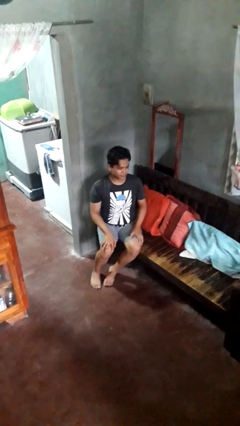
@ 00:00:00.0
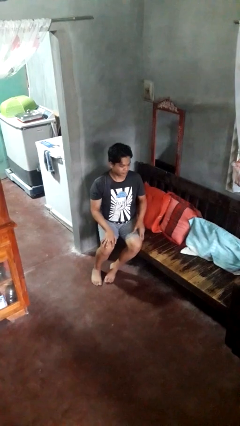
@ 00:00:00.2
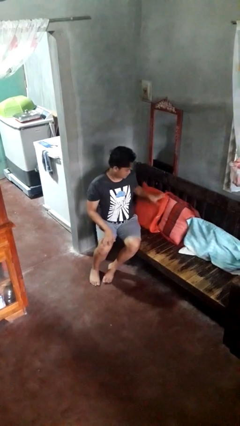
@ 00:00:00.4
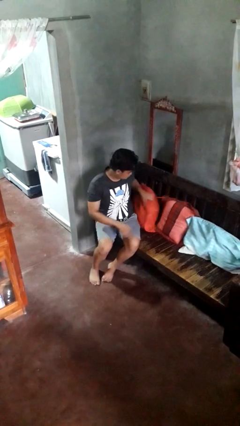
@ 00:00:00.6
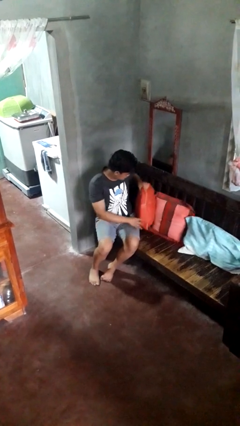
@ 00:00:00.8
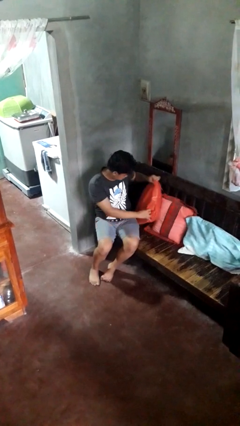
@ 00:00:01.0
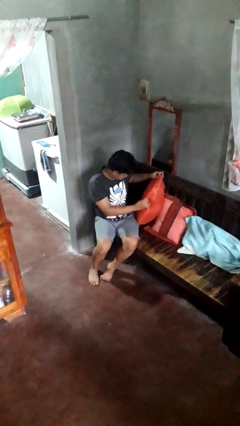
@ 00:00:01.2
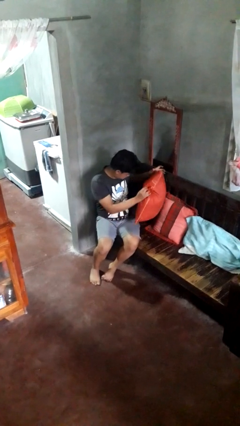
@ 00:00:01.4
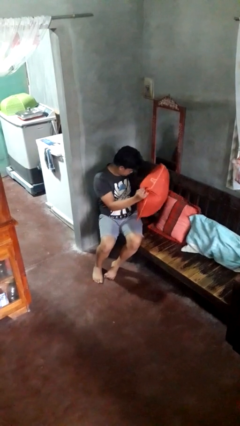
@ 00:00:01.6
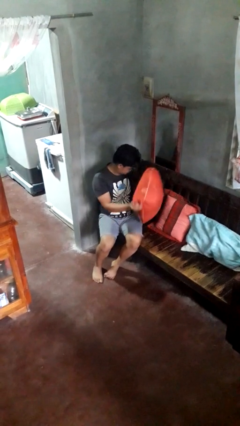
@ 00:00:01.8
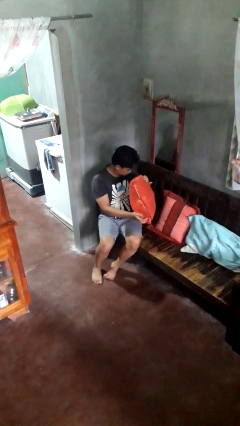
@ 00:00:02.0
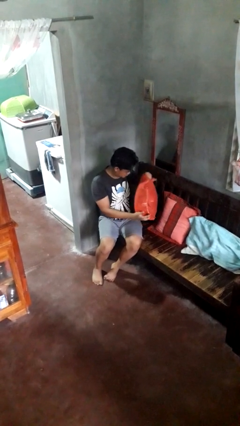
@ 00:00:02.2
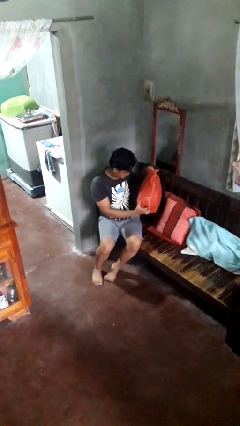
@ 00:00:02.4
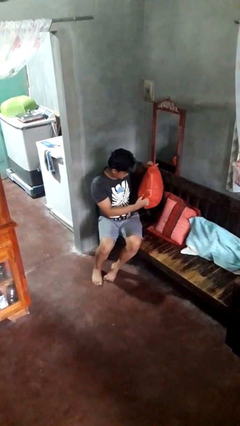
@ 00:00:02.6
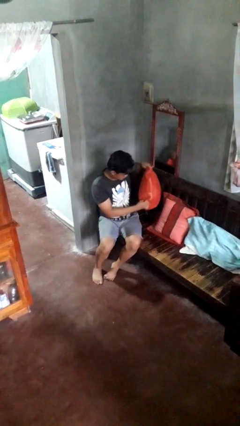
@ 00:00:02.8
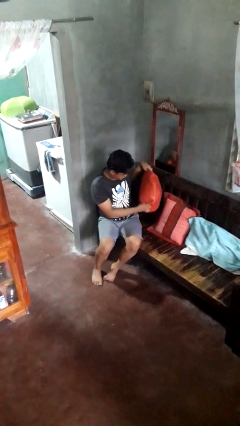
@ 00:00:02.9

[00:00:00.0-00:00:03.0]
person searches in couch

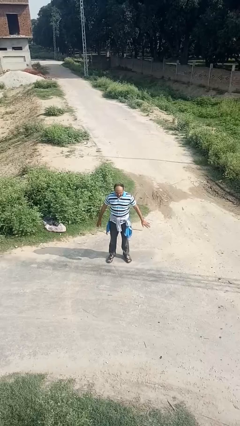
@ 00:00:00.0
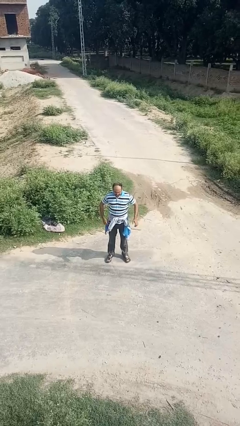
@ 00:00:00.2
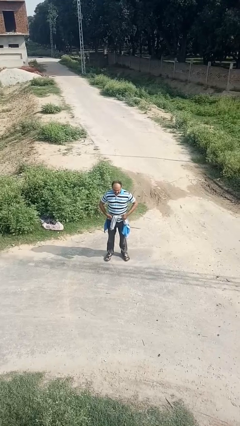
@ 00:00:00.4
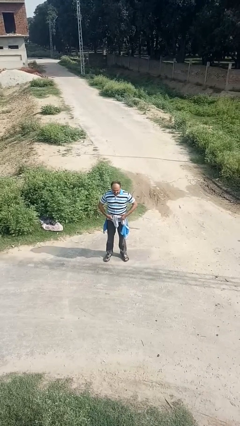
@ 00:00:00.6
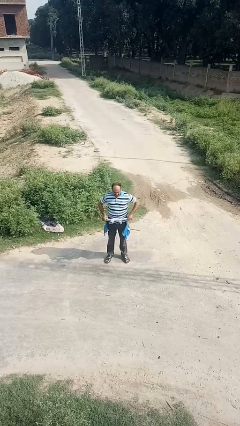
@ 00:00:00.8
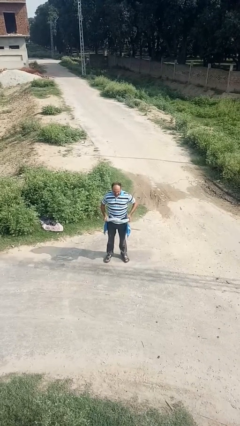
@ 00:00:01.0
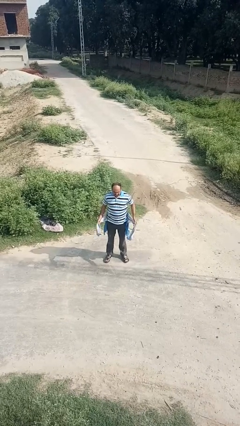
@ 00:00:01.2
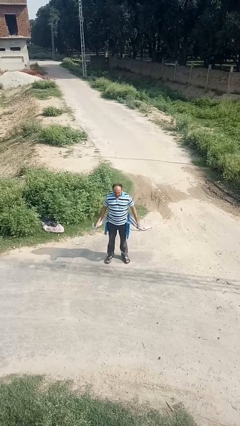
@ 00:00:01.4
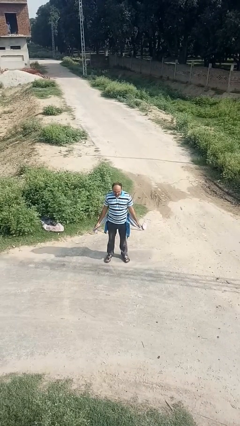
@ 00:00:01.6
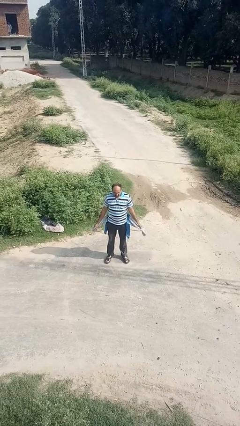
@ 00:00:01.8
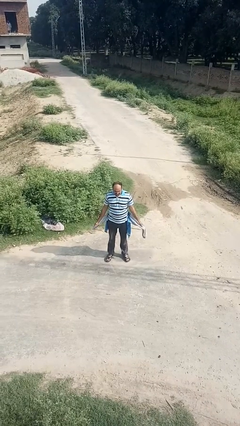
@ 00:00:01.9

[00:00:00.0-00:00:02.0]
person unties jacket around waist

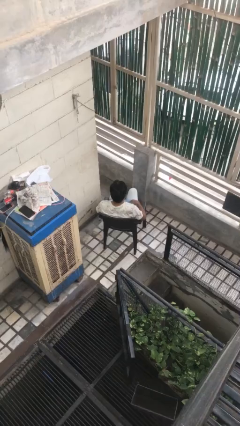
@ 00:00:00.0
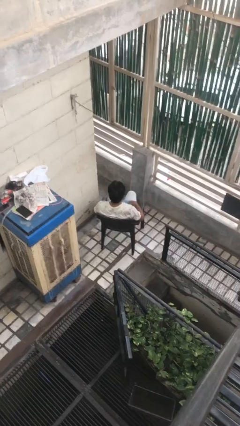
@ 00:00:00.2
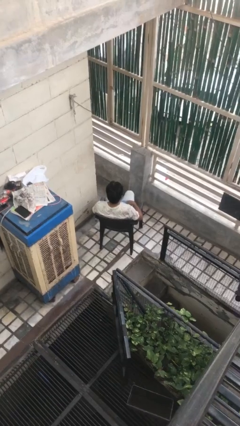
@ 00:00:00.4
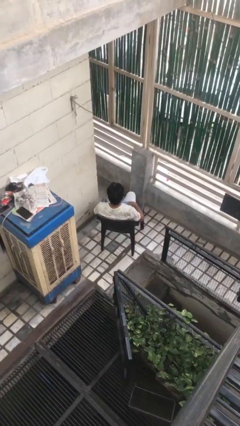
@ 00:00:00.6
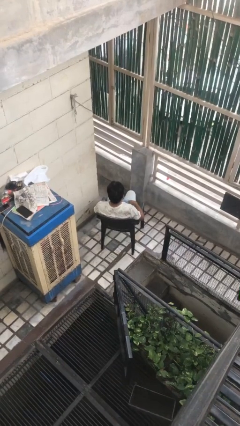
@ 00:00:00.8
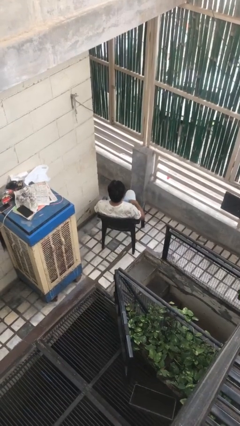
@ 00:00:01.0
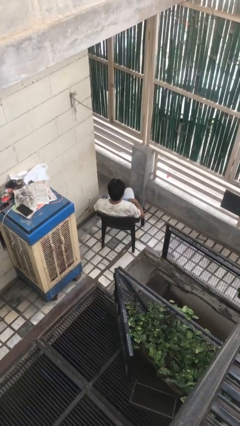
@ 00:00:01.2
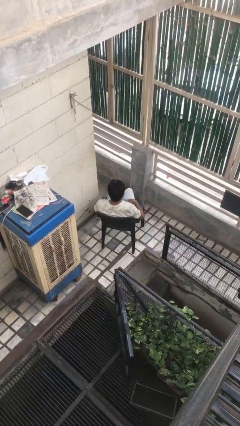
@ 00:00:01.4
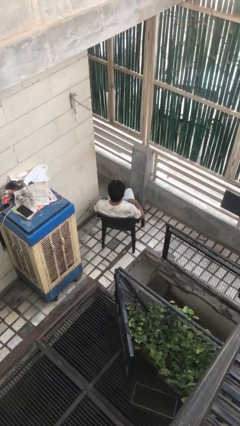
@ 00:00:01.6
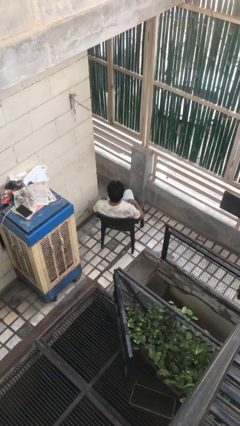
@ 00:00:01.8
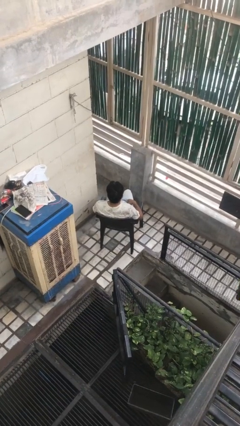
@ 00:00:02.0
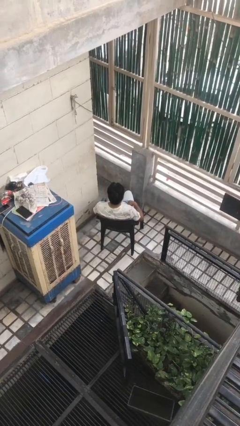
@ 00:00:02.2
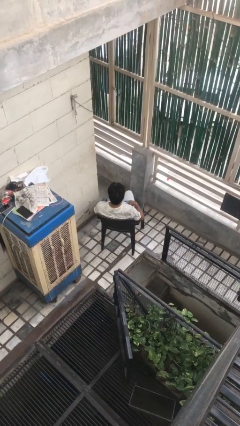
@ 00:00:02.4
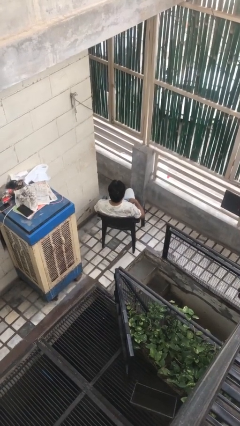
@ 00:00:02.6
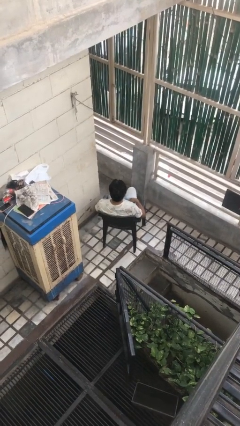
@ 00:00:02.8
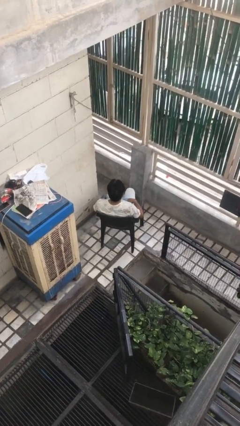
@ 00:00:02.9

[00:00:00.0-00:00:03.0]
person crosses legs

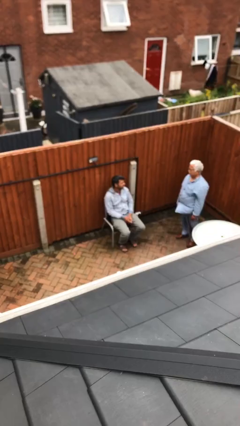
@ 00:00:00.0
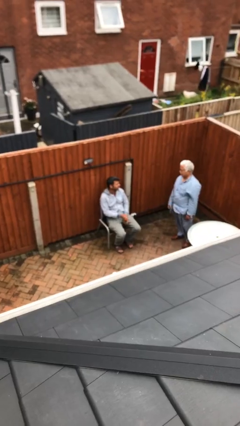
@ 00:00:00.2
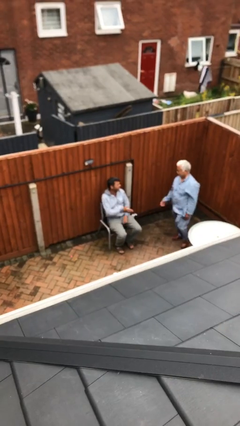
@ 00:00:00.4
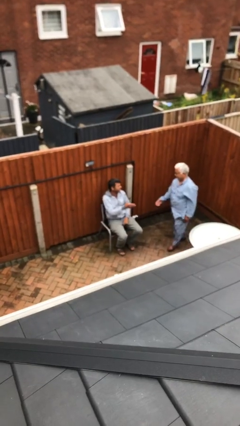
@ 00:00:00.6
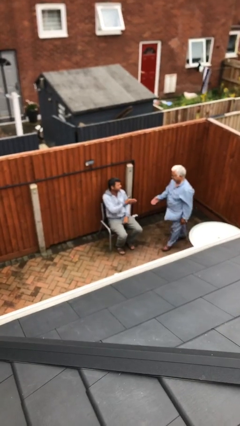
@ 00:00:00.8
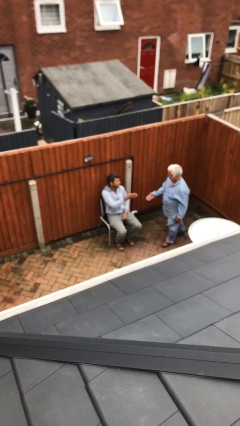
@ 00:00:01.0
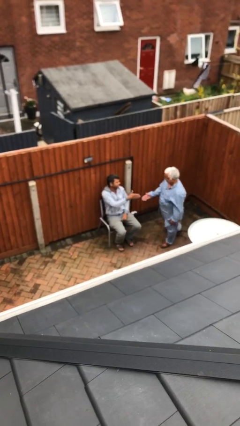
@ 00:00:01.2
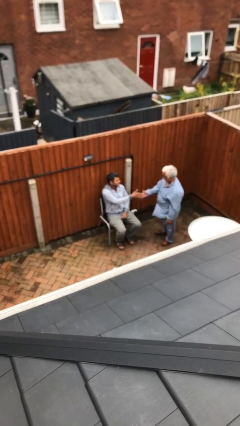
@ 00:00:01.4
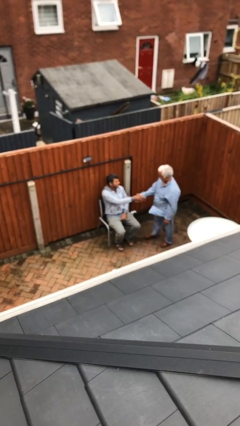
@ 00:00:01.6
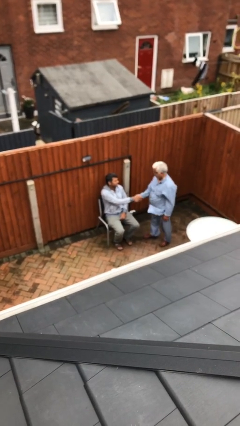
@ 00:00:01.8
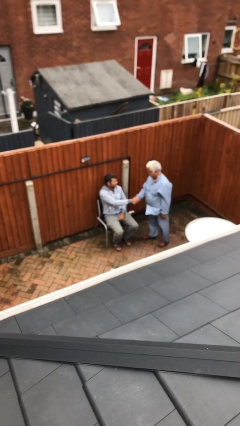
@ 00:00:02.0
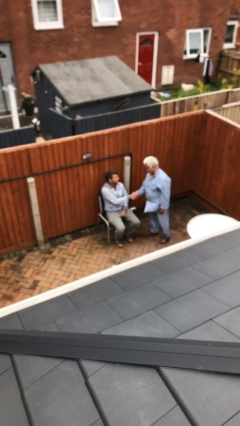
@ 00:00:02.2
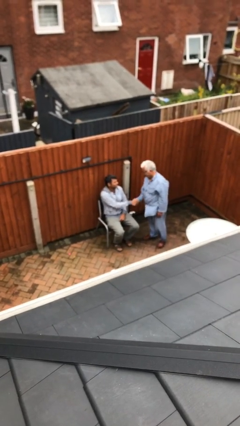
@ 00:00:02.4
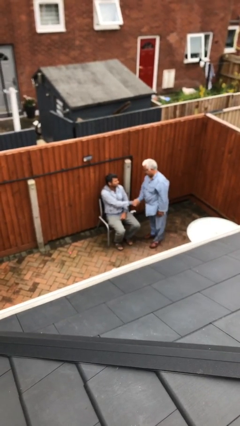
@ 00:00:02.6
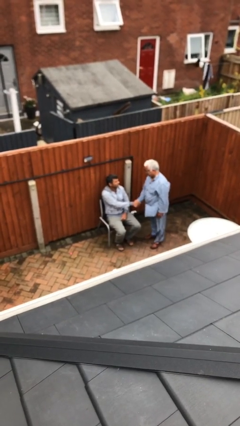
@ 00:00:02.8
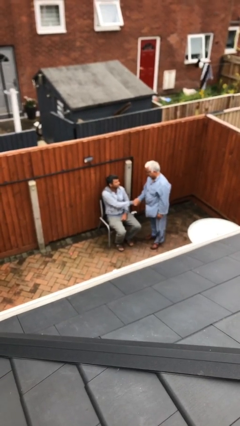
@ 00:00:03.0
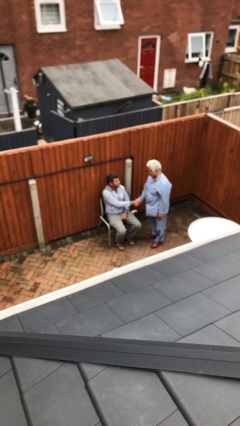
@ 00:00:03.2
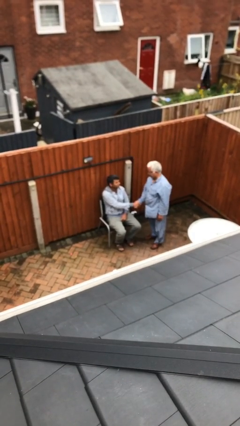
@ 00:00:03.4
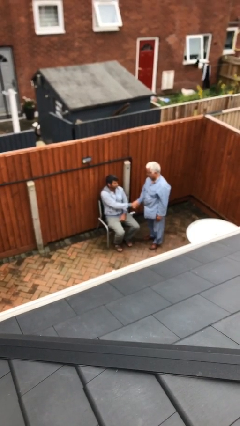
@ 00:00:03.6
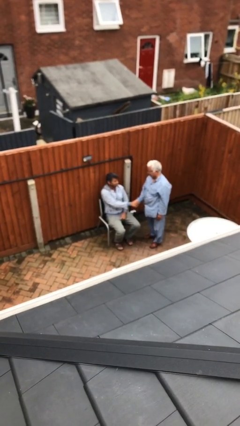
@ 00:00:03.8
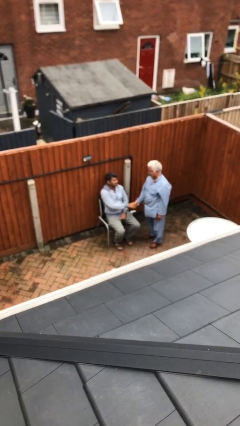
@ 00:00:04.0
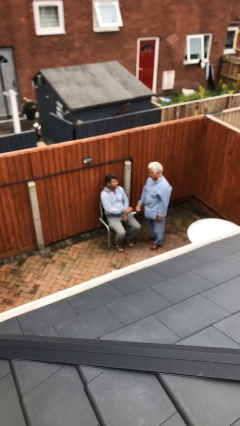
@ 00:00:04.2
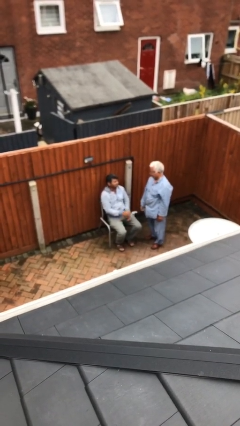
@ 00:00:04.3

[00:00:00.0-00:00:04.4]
person shakes hand

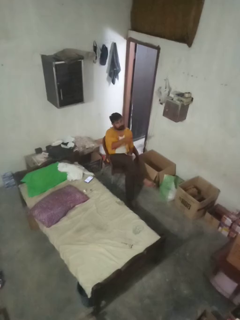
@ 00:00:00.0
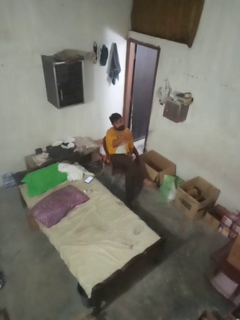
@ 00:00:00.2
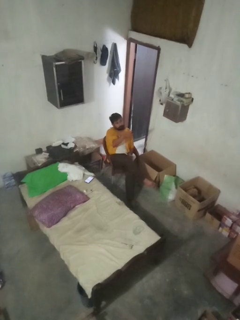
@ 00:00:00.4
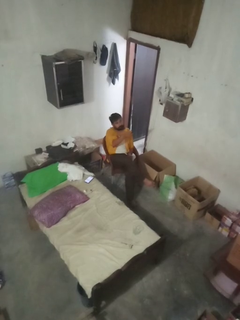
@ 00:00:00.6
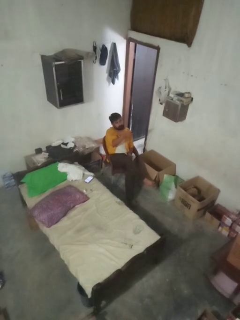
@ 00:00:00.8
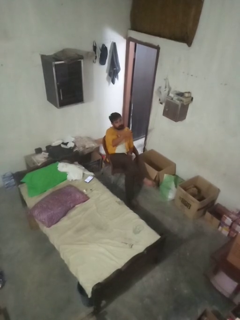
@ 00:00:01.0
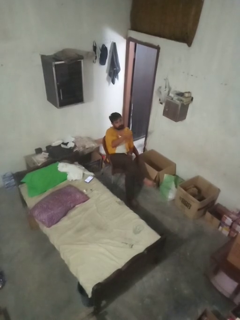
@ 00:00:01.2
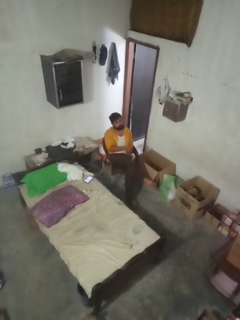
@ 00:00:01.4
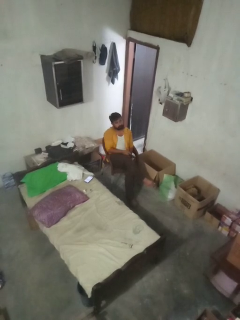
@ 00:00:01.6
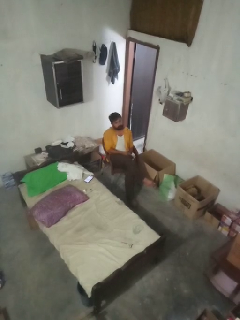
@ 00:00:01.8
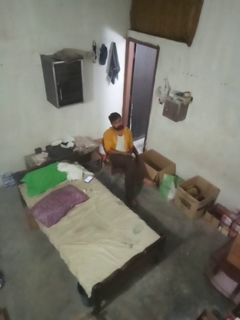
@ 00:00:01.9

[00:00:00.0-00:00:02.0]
person uses television remote

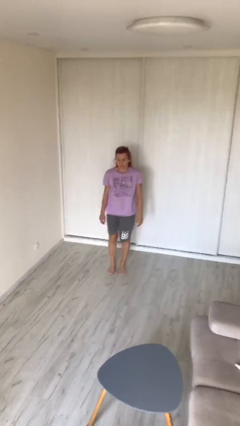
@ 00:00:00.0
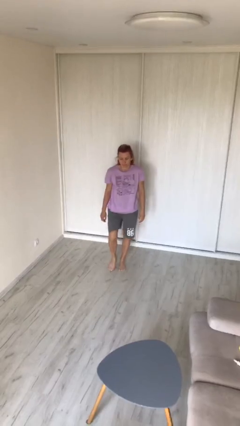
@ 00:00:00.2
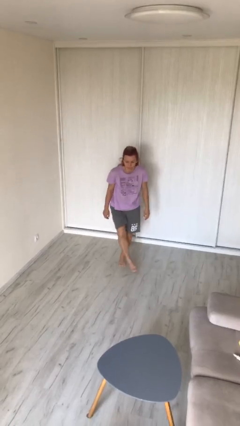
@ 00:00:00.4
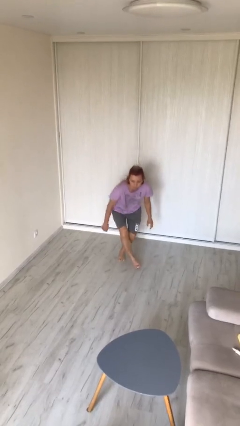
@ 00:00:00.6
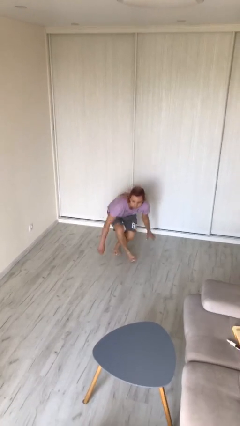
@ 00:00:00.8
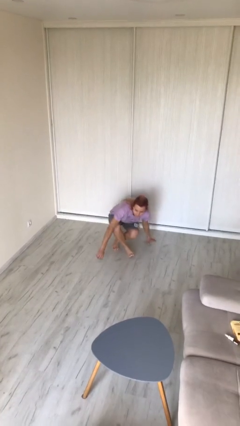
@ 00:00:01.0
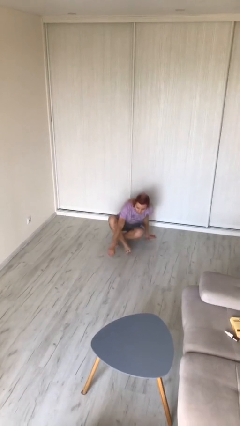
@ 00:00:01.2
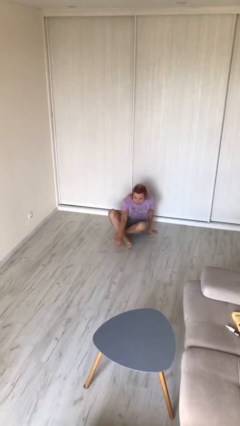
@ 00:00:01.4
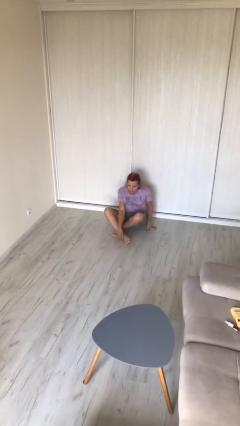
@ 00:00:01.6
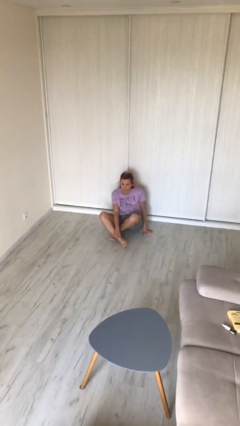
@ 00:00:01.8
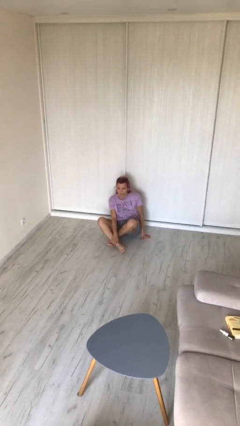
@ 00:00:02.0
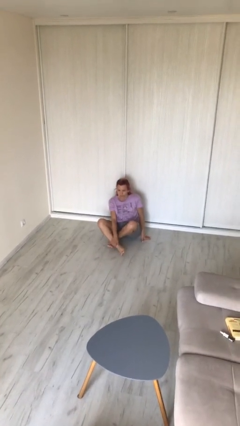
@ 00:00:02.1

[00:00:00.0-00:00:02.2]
person sits crisscross

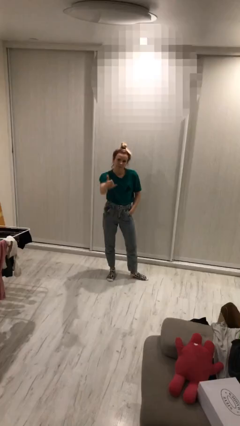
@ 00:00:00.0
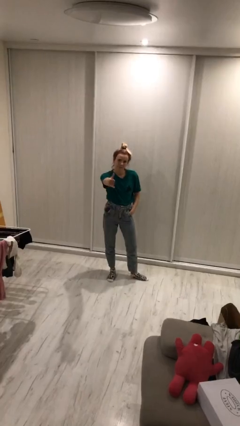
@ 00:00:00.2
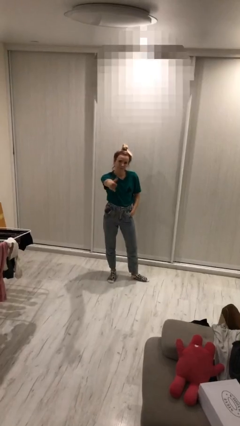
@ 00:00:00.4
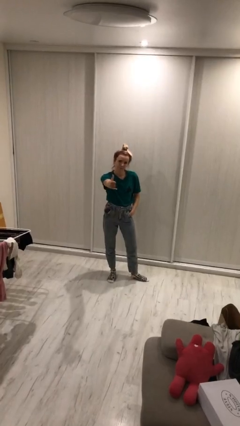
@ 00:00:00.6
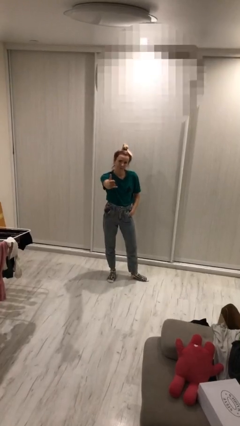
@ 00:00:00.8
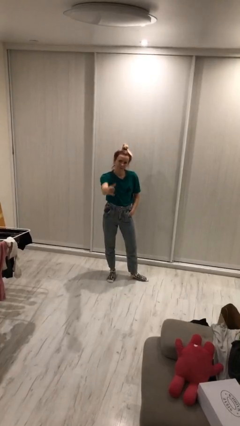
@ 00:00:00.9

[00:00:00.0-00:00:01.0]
person gestures hang loose
